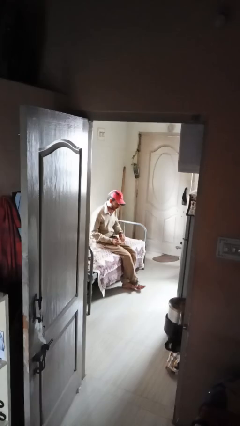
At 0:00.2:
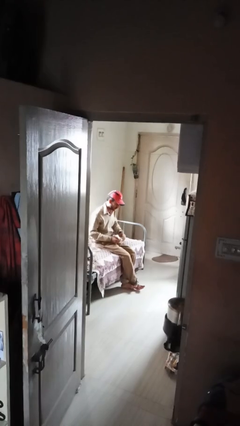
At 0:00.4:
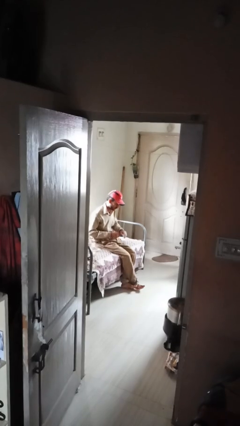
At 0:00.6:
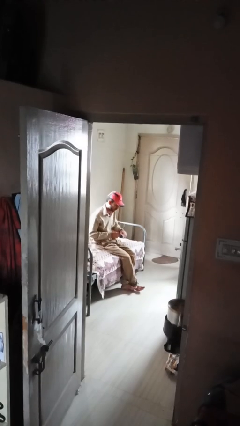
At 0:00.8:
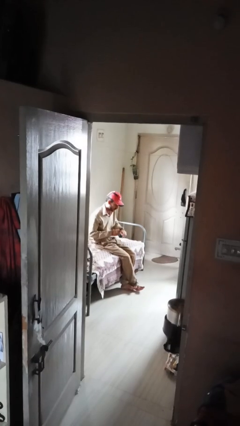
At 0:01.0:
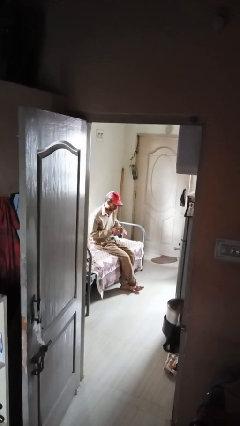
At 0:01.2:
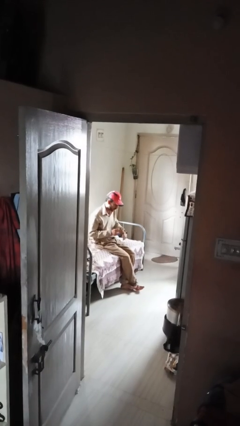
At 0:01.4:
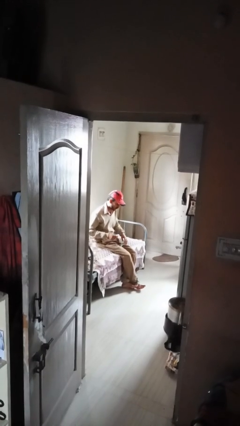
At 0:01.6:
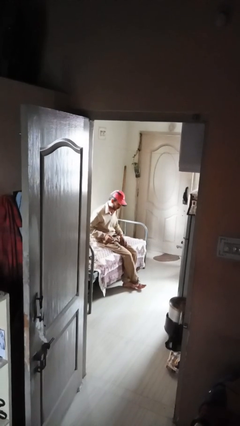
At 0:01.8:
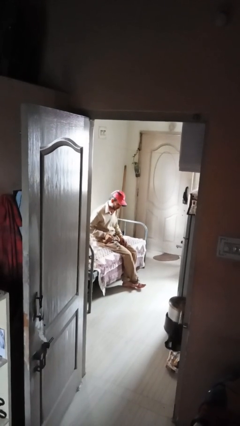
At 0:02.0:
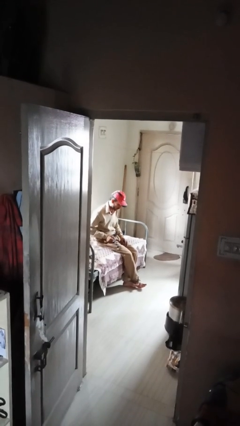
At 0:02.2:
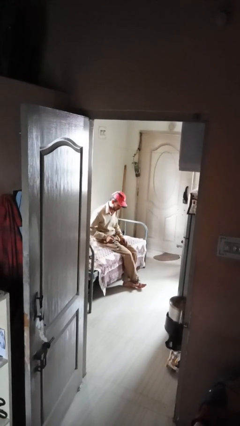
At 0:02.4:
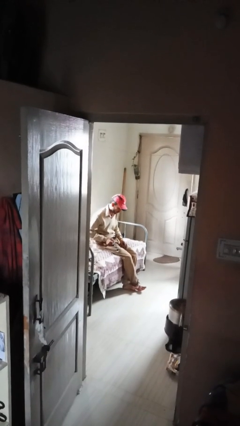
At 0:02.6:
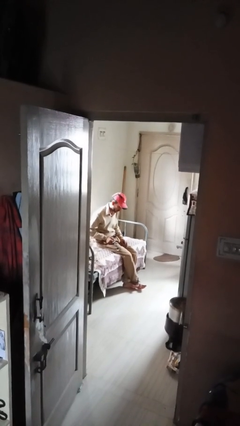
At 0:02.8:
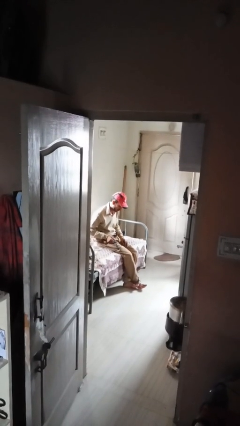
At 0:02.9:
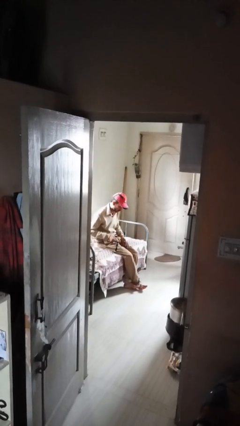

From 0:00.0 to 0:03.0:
person takes off wristwatch

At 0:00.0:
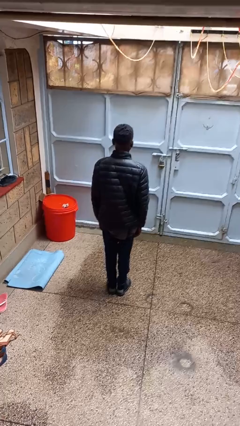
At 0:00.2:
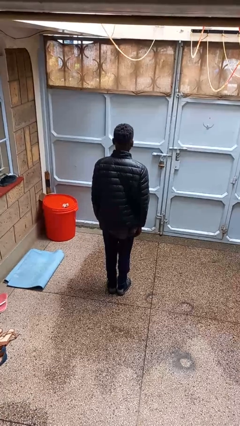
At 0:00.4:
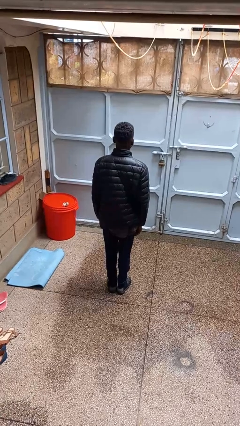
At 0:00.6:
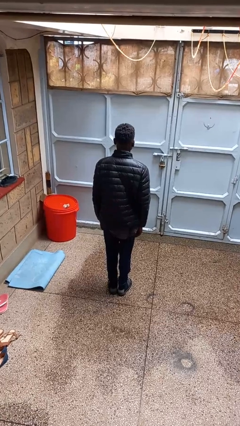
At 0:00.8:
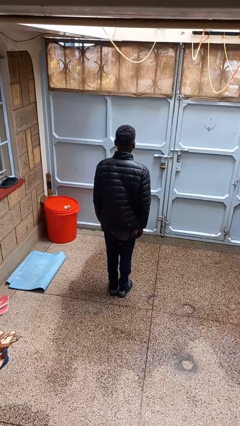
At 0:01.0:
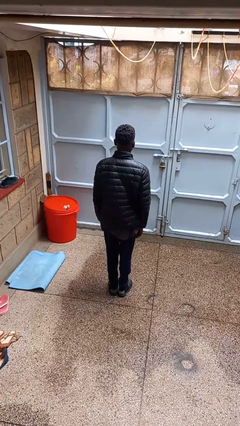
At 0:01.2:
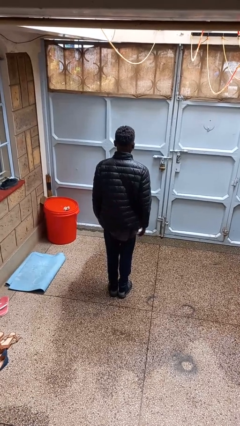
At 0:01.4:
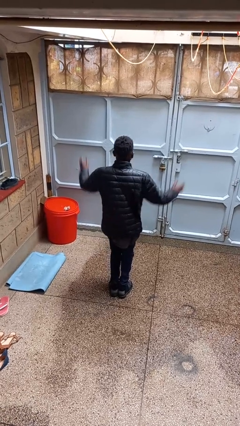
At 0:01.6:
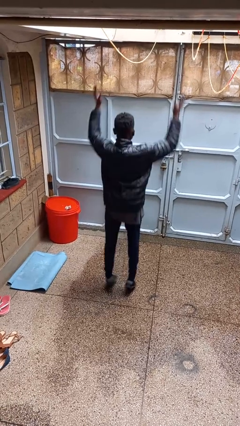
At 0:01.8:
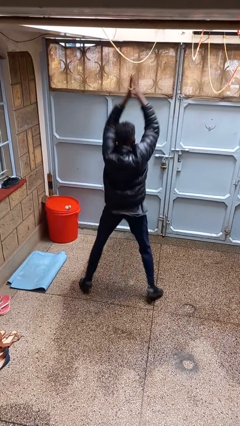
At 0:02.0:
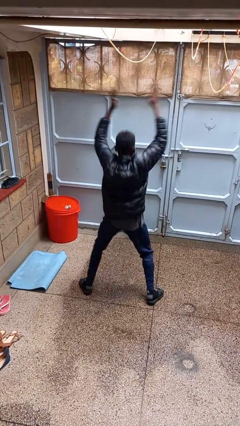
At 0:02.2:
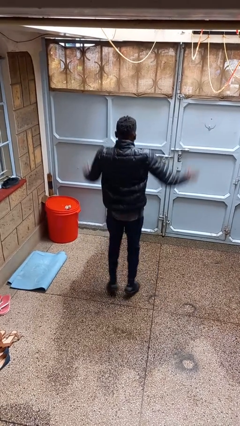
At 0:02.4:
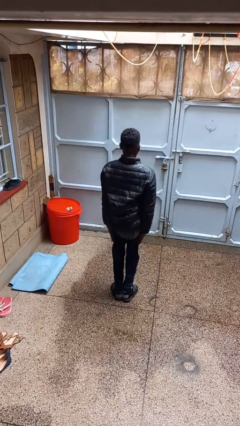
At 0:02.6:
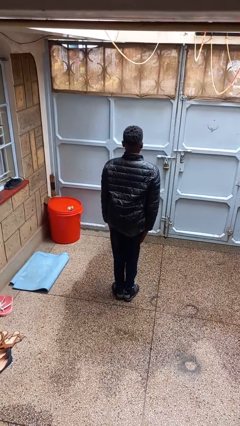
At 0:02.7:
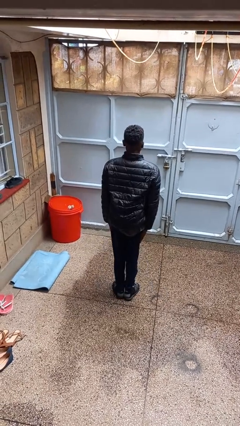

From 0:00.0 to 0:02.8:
person exercises with jumping jacks

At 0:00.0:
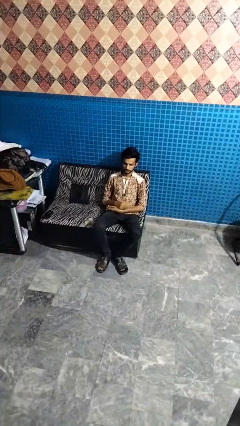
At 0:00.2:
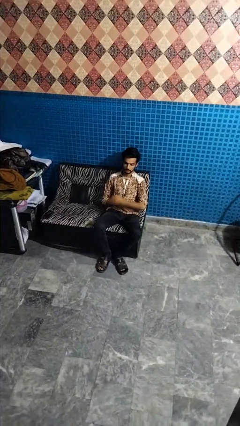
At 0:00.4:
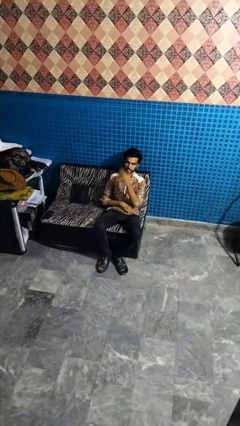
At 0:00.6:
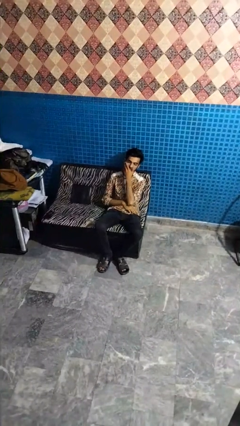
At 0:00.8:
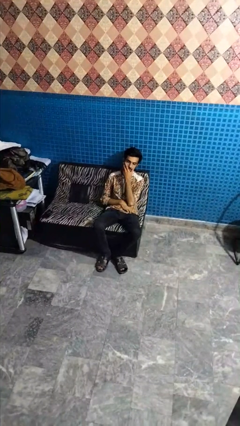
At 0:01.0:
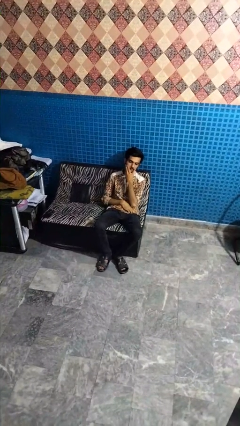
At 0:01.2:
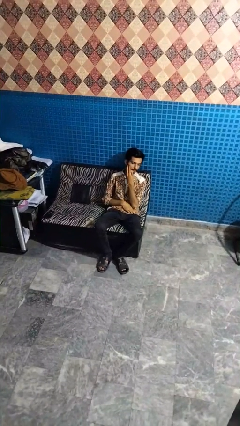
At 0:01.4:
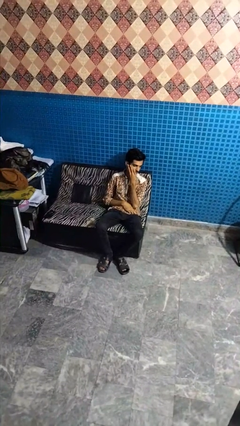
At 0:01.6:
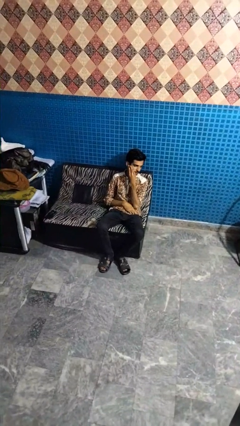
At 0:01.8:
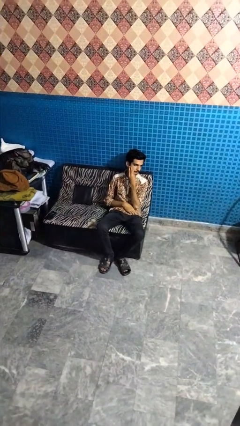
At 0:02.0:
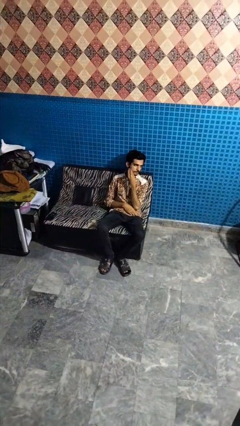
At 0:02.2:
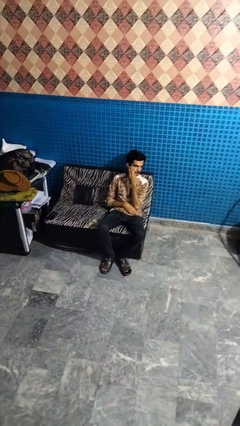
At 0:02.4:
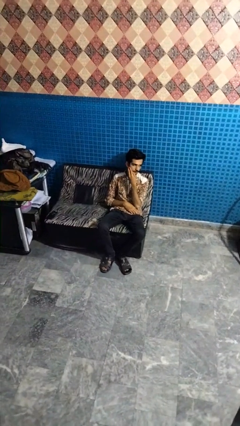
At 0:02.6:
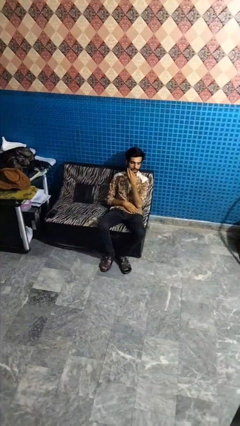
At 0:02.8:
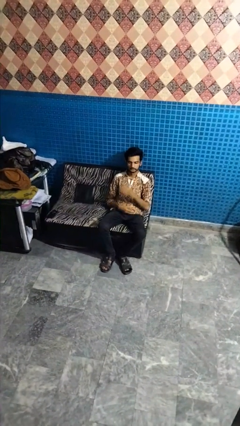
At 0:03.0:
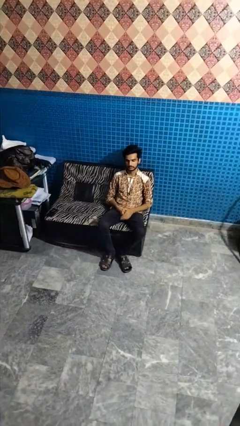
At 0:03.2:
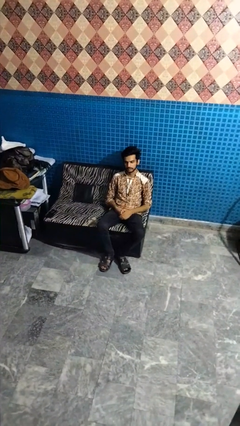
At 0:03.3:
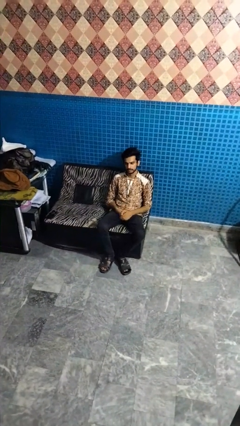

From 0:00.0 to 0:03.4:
person strokes chin

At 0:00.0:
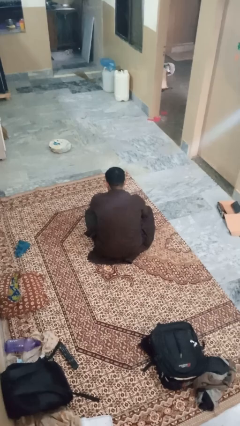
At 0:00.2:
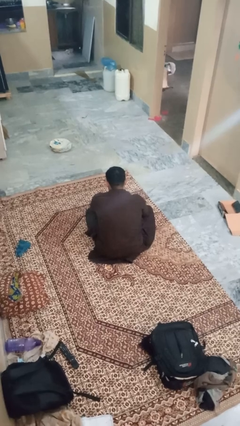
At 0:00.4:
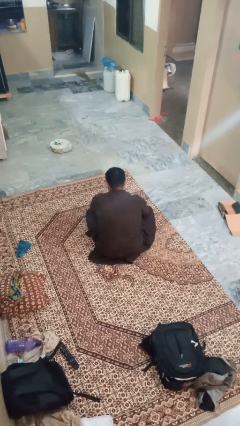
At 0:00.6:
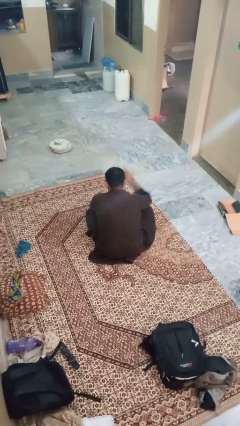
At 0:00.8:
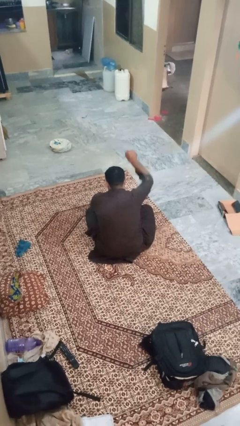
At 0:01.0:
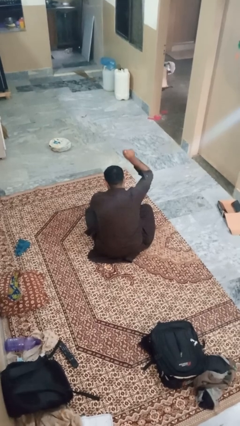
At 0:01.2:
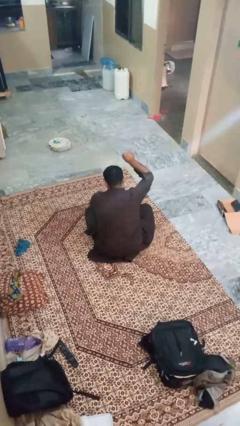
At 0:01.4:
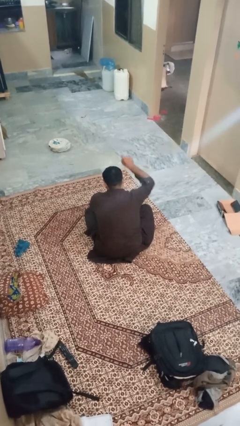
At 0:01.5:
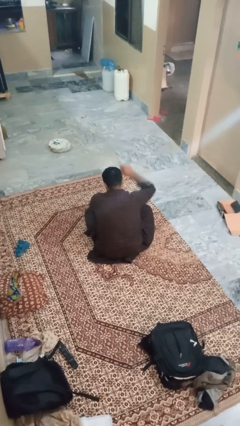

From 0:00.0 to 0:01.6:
person gestures number one

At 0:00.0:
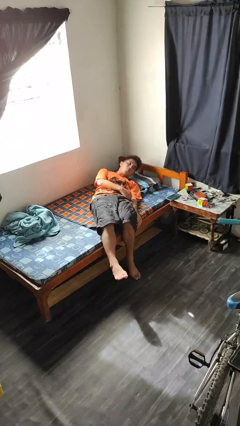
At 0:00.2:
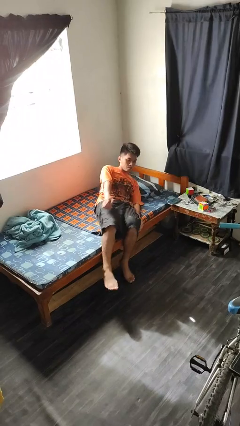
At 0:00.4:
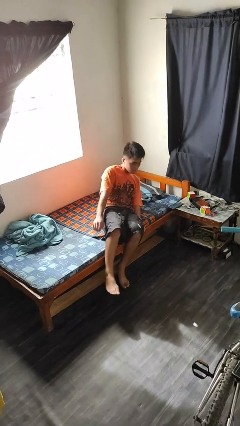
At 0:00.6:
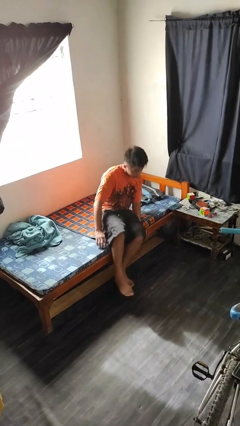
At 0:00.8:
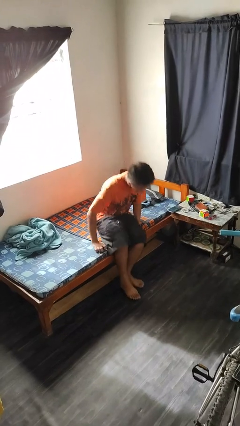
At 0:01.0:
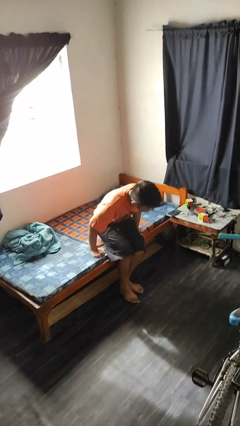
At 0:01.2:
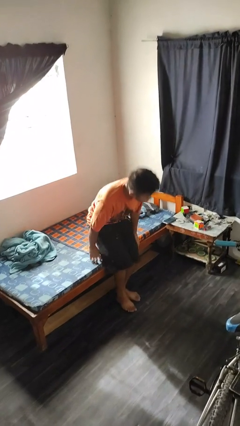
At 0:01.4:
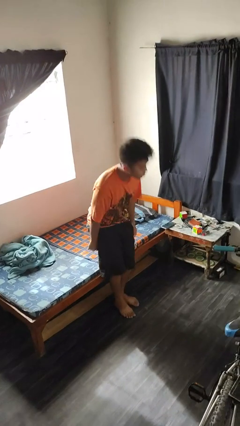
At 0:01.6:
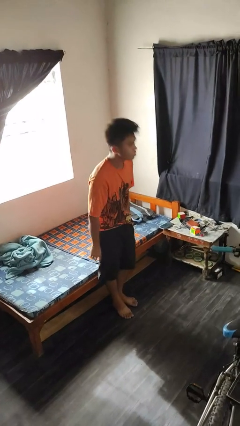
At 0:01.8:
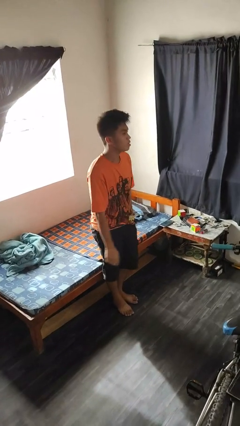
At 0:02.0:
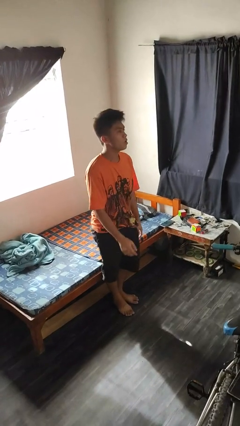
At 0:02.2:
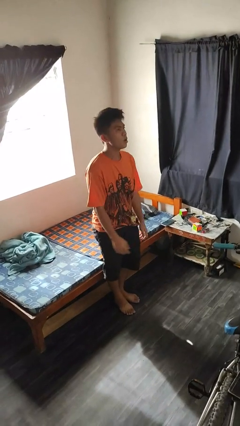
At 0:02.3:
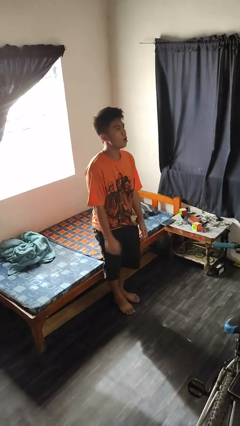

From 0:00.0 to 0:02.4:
person stands up

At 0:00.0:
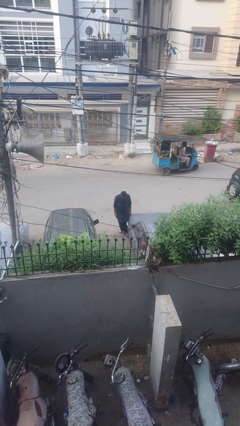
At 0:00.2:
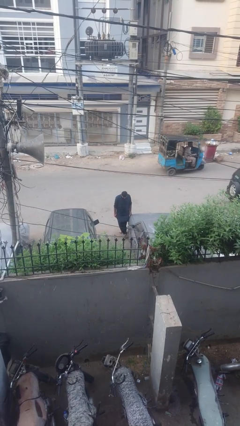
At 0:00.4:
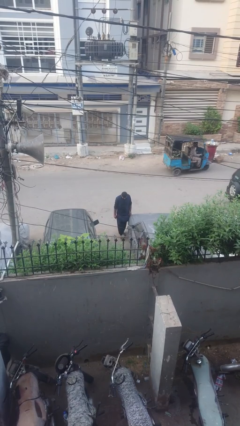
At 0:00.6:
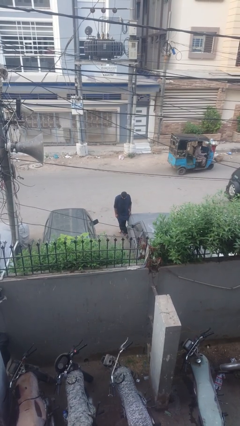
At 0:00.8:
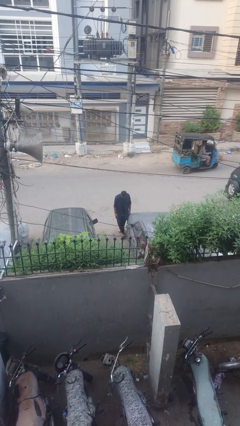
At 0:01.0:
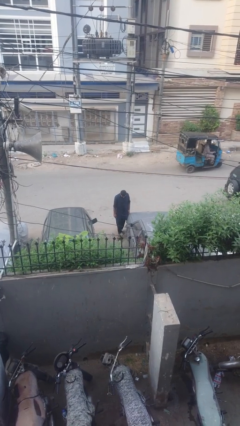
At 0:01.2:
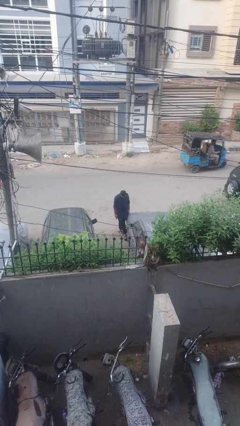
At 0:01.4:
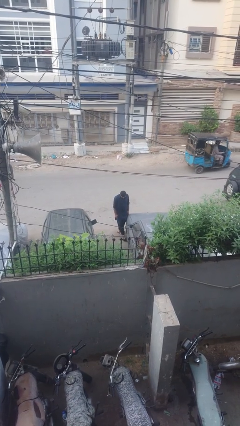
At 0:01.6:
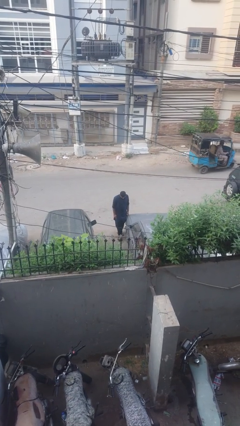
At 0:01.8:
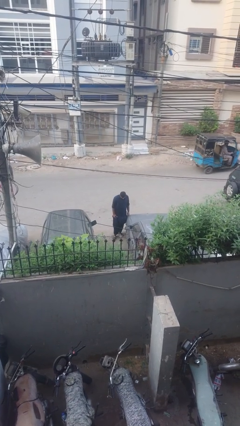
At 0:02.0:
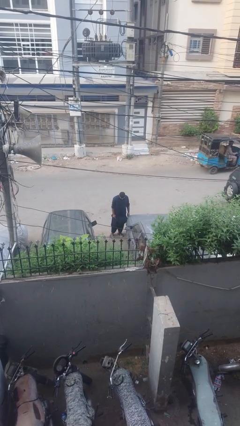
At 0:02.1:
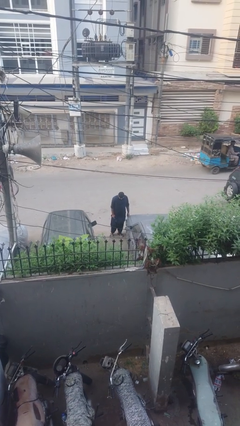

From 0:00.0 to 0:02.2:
person kicks car tires

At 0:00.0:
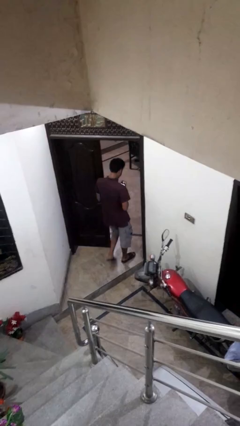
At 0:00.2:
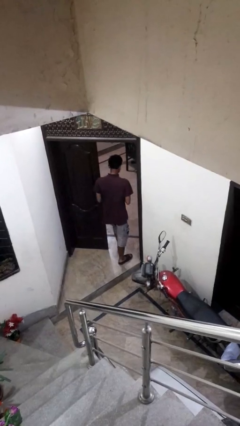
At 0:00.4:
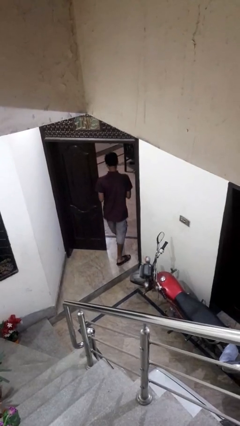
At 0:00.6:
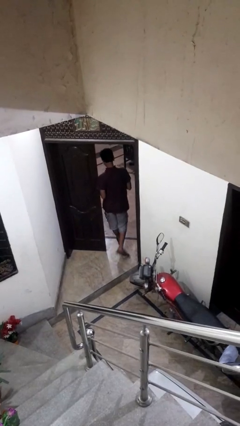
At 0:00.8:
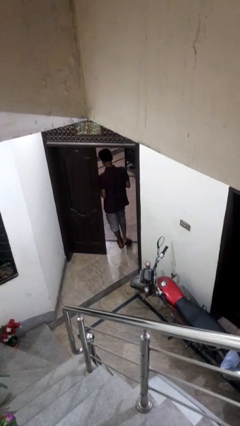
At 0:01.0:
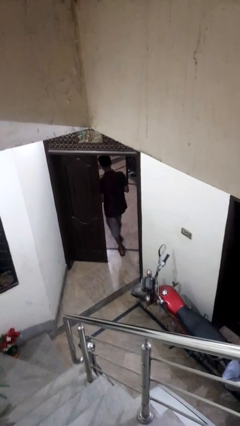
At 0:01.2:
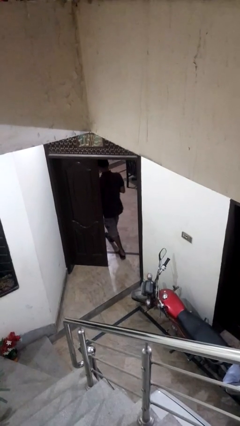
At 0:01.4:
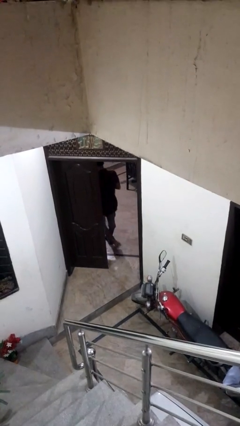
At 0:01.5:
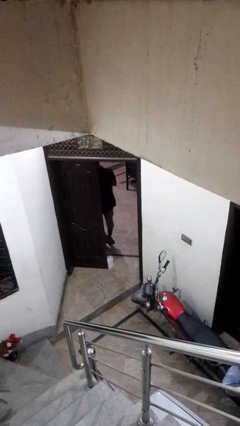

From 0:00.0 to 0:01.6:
person exits scene through structure

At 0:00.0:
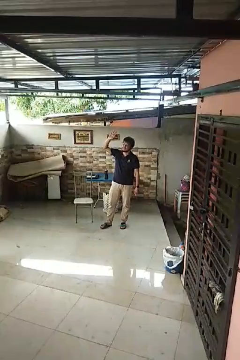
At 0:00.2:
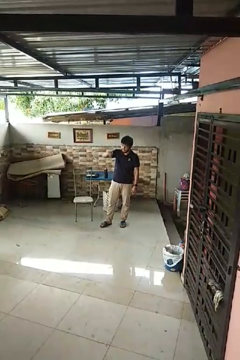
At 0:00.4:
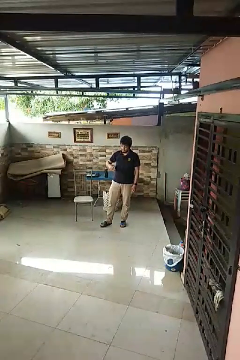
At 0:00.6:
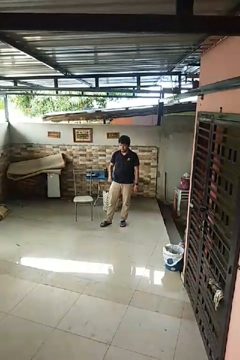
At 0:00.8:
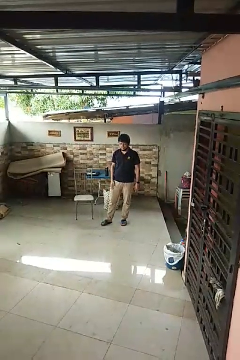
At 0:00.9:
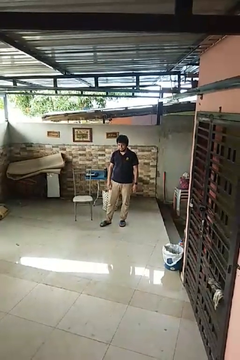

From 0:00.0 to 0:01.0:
person gestures swipe down
